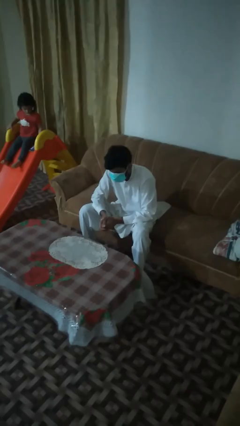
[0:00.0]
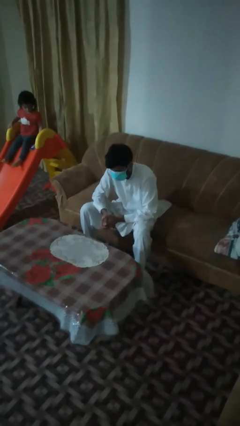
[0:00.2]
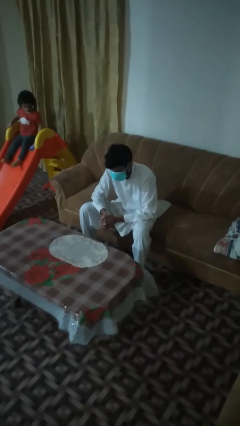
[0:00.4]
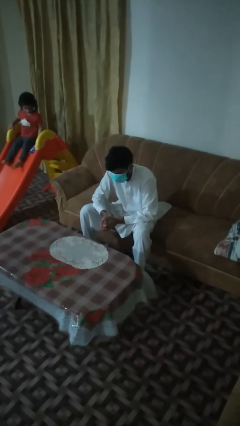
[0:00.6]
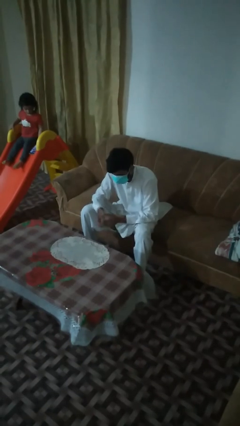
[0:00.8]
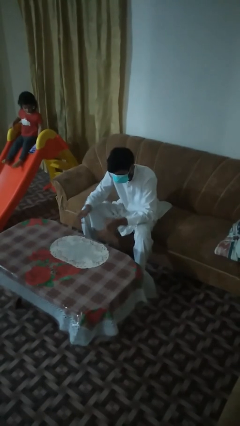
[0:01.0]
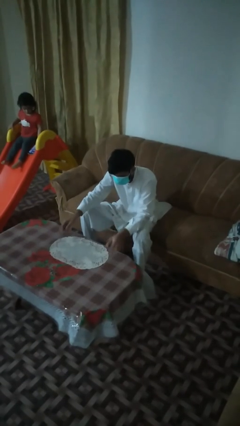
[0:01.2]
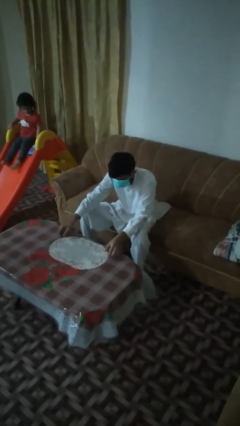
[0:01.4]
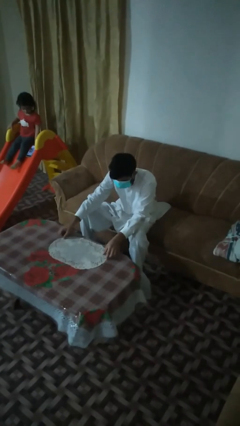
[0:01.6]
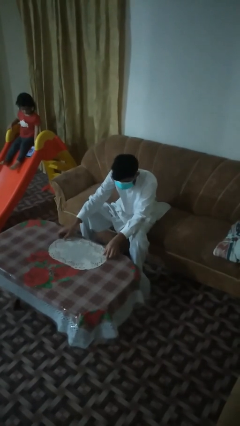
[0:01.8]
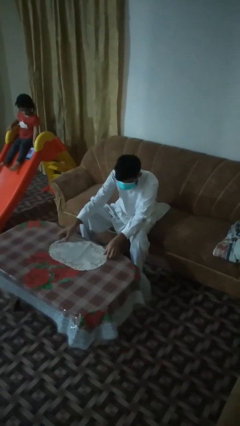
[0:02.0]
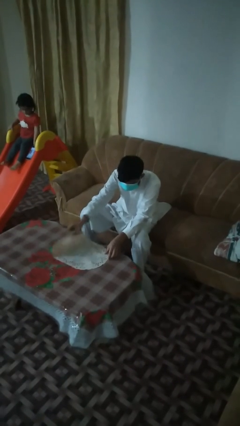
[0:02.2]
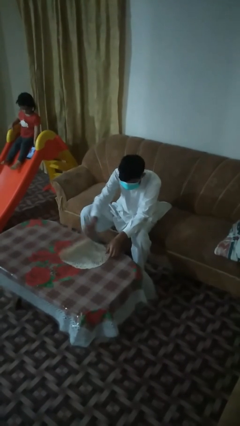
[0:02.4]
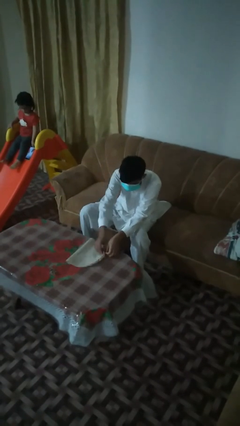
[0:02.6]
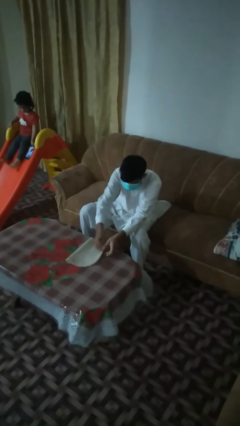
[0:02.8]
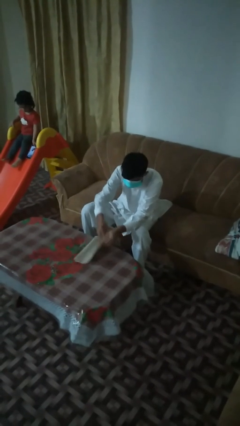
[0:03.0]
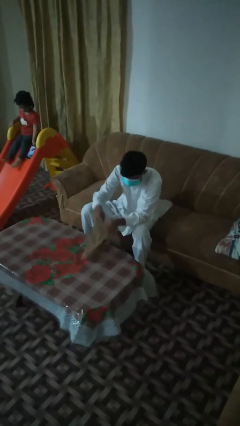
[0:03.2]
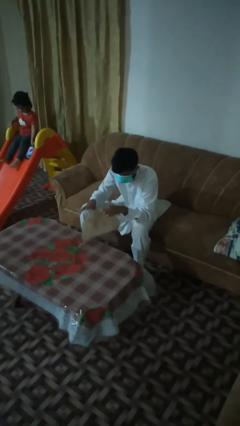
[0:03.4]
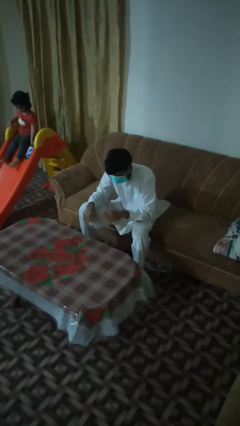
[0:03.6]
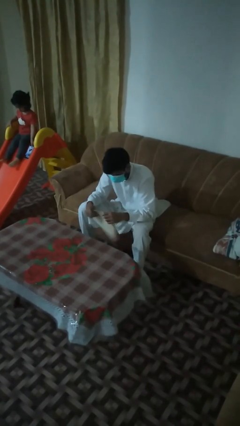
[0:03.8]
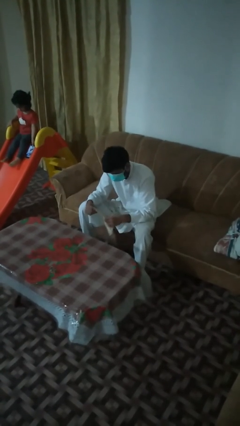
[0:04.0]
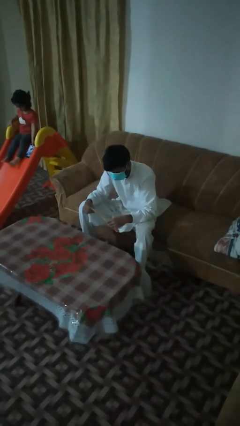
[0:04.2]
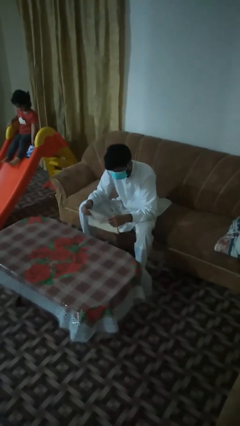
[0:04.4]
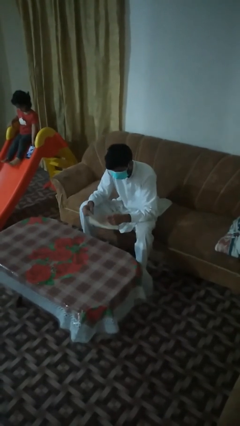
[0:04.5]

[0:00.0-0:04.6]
person folds tablecloth

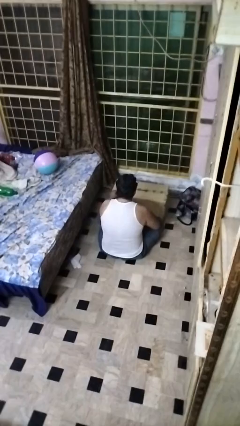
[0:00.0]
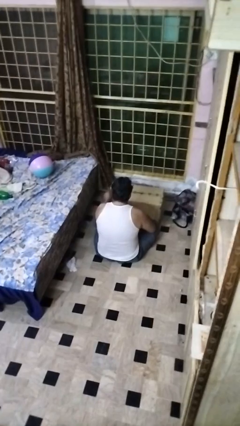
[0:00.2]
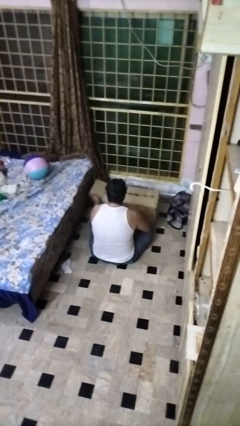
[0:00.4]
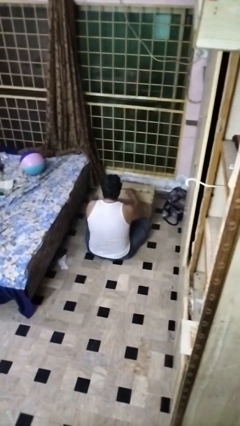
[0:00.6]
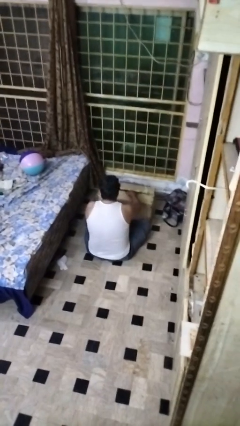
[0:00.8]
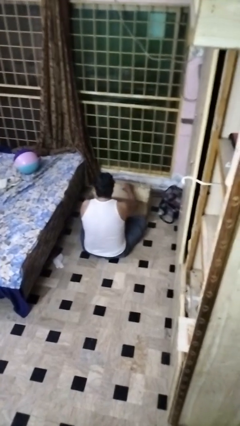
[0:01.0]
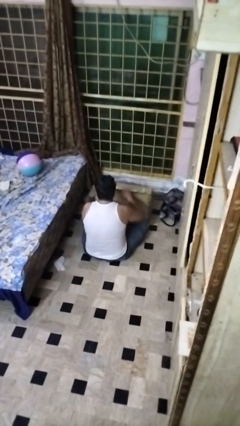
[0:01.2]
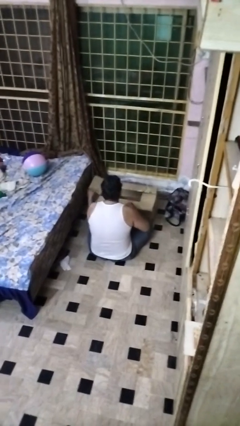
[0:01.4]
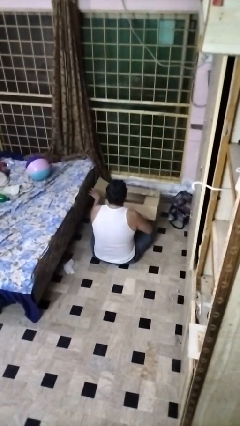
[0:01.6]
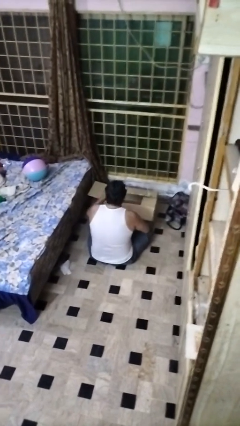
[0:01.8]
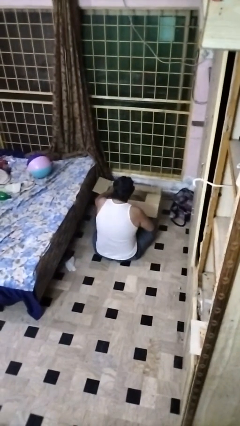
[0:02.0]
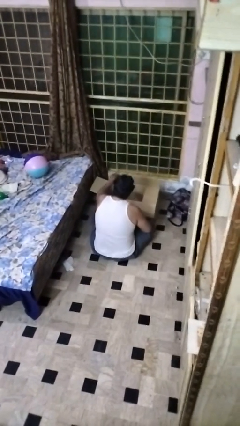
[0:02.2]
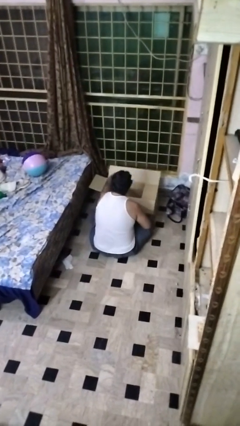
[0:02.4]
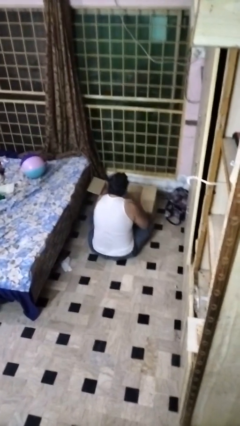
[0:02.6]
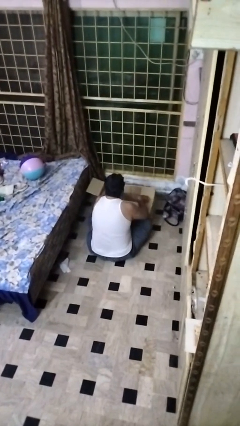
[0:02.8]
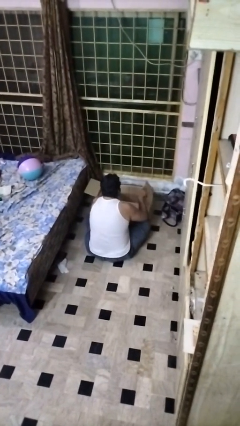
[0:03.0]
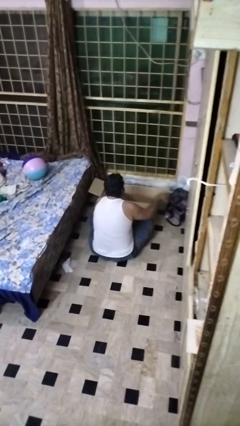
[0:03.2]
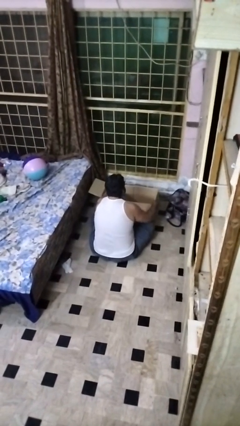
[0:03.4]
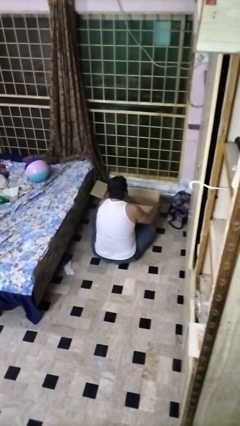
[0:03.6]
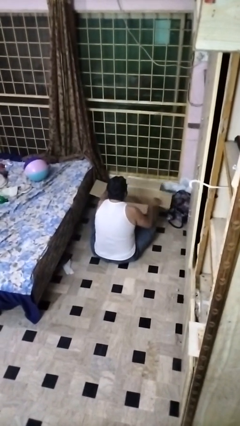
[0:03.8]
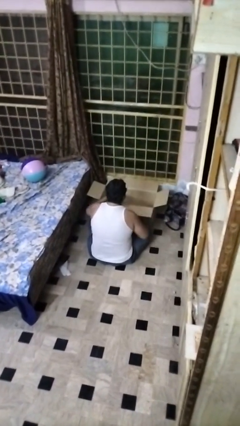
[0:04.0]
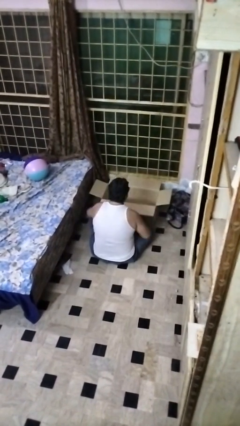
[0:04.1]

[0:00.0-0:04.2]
person opens box

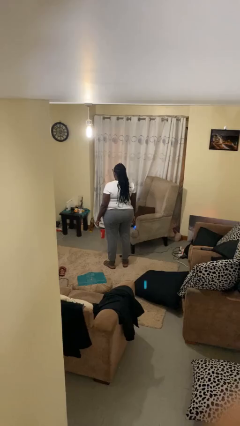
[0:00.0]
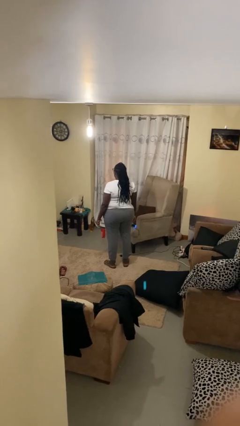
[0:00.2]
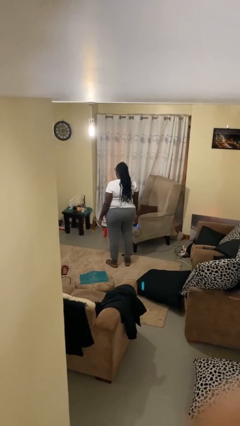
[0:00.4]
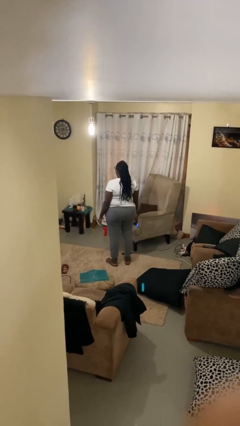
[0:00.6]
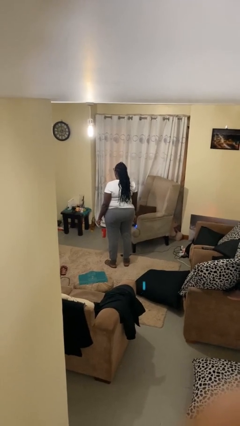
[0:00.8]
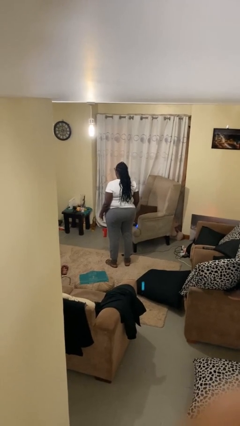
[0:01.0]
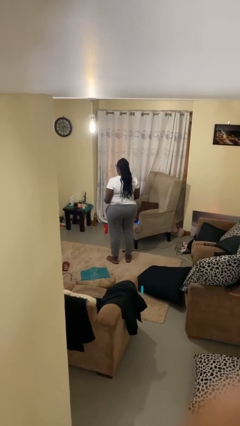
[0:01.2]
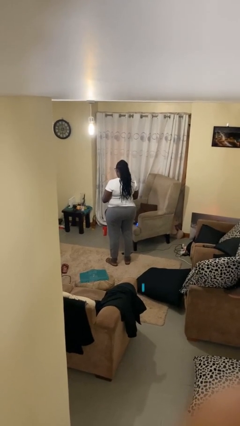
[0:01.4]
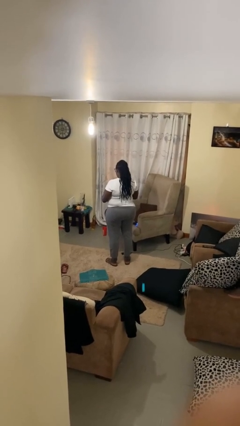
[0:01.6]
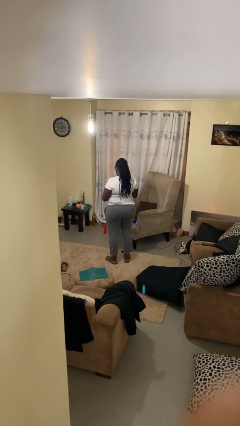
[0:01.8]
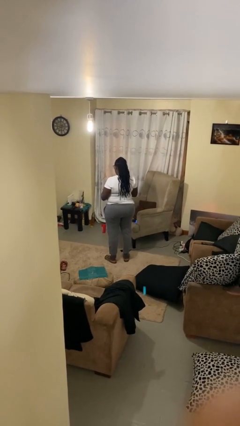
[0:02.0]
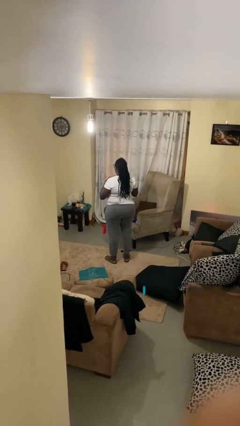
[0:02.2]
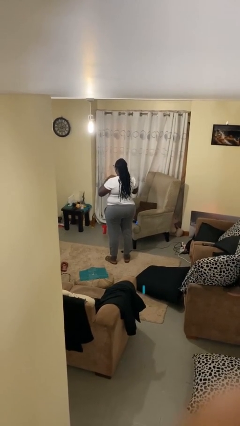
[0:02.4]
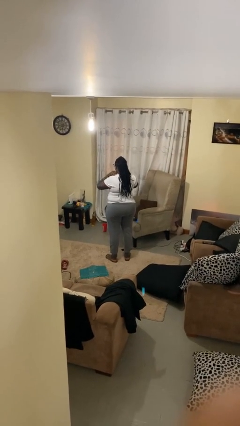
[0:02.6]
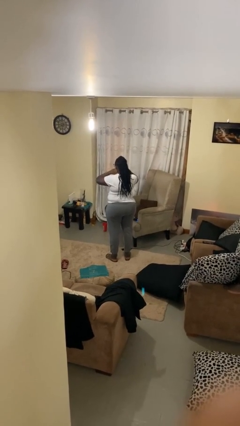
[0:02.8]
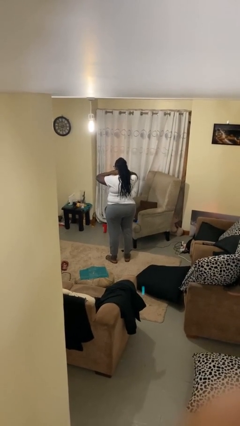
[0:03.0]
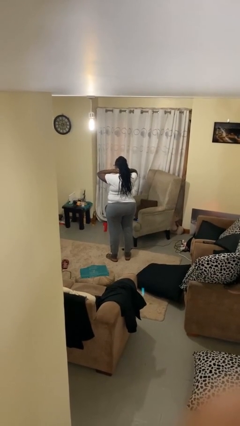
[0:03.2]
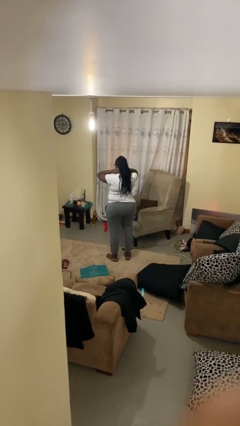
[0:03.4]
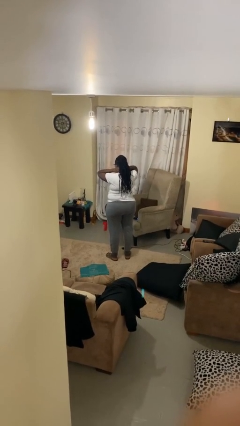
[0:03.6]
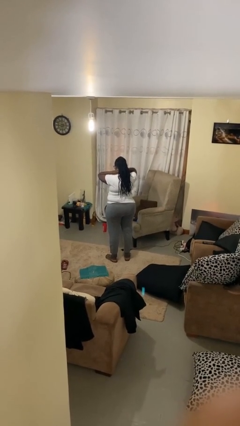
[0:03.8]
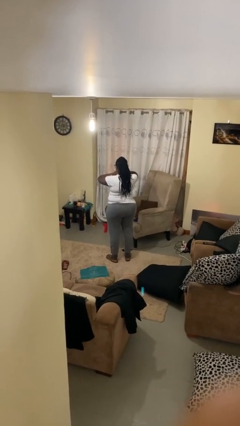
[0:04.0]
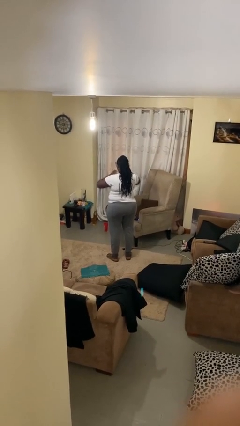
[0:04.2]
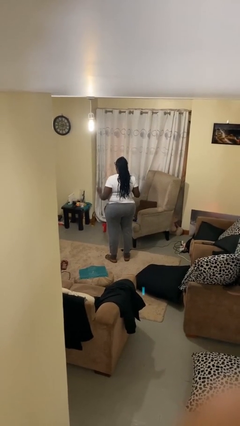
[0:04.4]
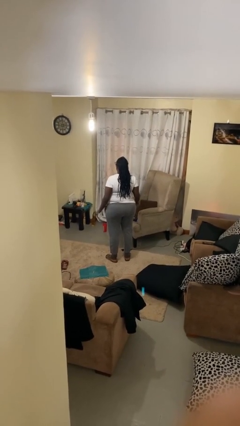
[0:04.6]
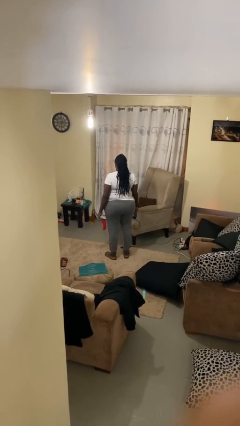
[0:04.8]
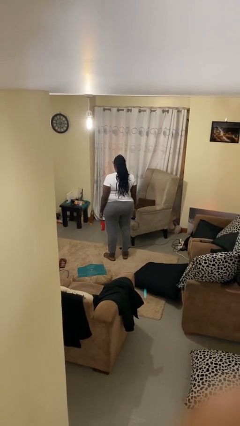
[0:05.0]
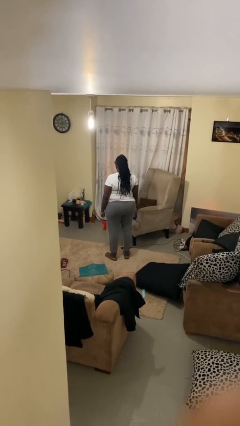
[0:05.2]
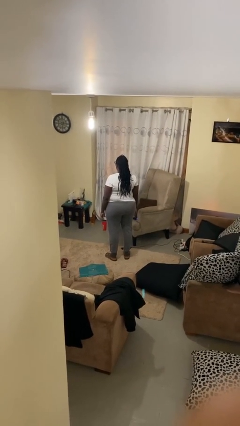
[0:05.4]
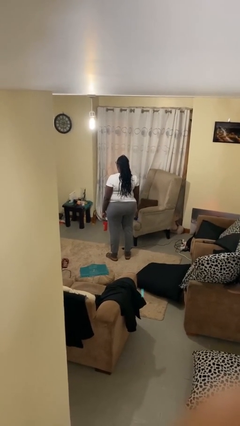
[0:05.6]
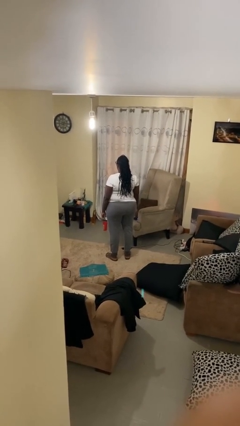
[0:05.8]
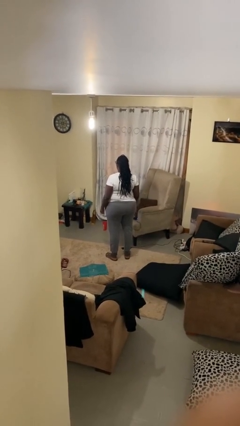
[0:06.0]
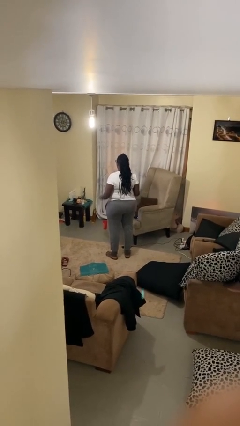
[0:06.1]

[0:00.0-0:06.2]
person puts on necklace

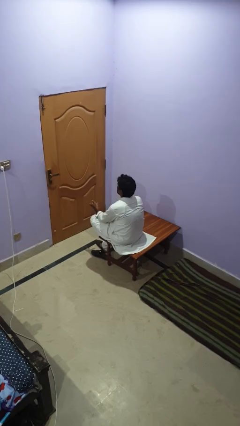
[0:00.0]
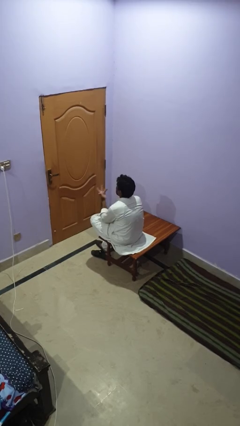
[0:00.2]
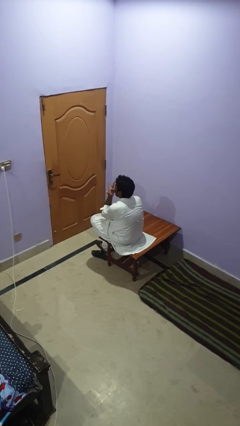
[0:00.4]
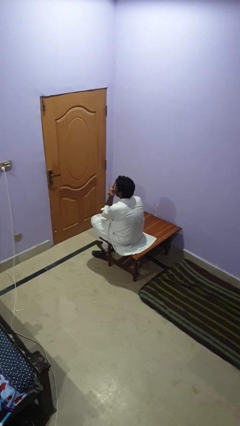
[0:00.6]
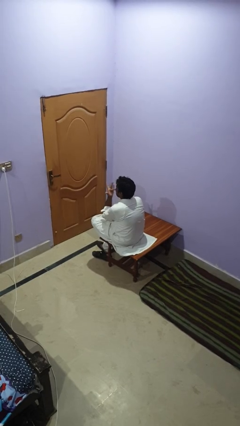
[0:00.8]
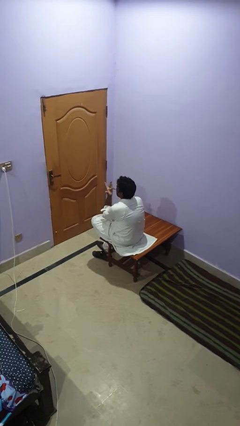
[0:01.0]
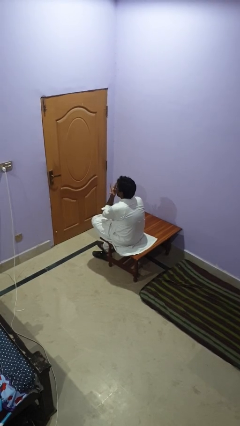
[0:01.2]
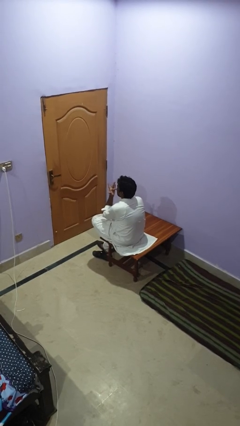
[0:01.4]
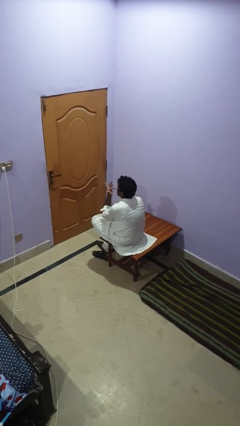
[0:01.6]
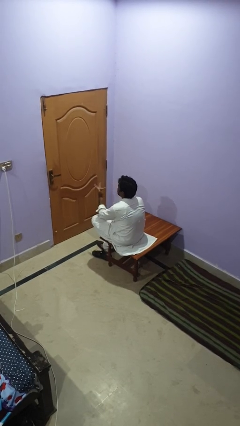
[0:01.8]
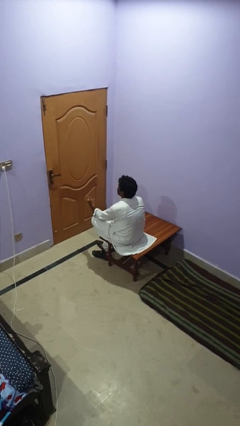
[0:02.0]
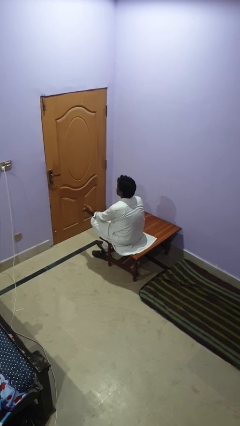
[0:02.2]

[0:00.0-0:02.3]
person licks fingers

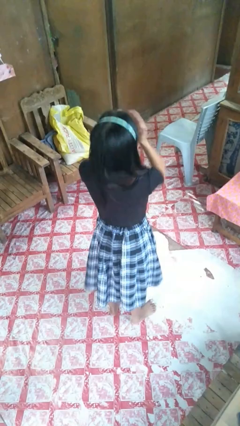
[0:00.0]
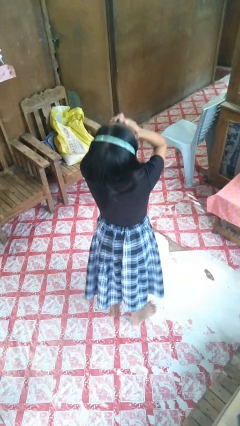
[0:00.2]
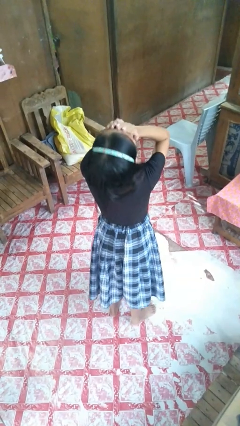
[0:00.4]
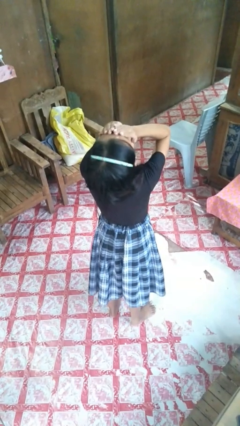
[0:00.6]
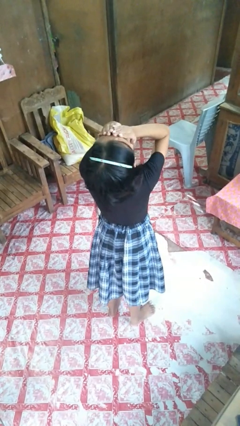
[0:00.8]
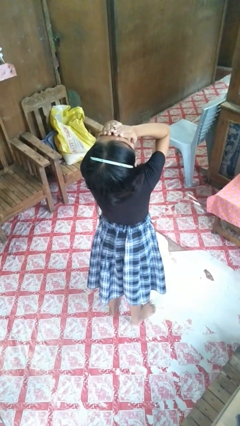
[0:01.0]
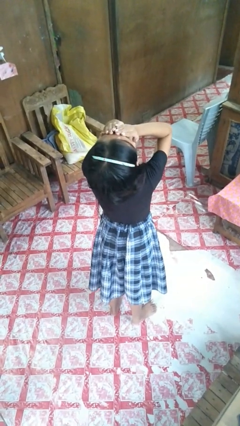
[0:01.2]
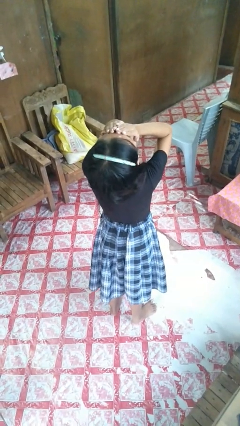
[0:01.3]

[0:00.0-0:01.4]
person covers face with hands
